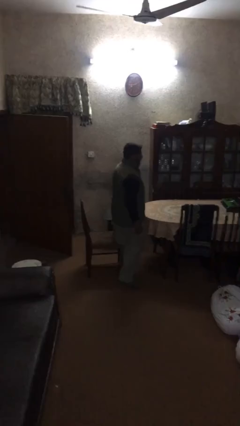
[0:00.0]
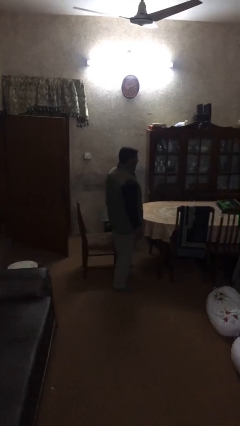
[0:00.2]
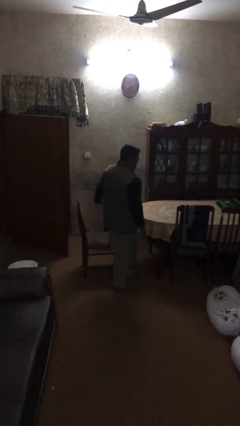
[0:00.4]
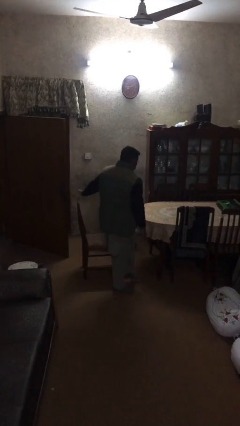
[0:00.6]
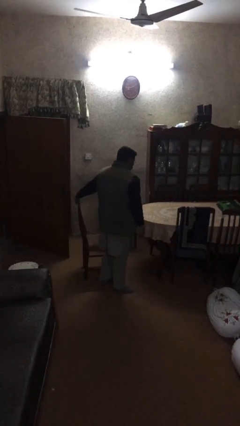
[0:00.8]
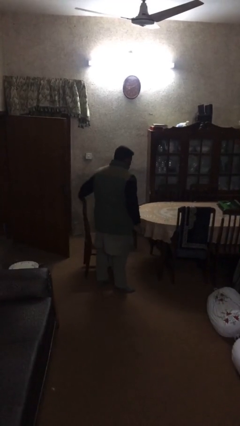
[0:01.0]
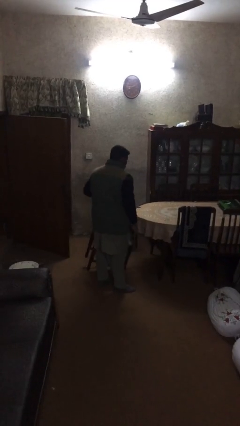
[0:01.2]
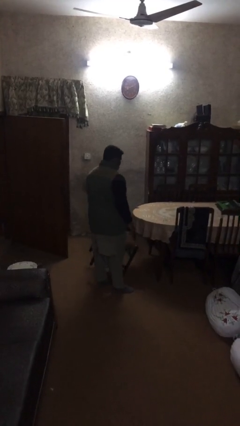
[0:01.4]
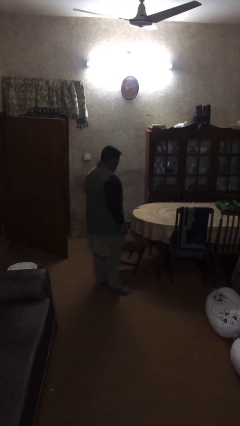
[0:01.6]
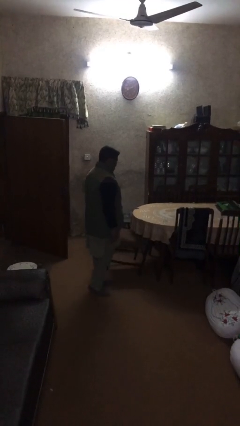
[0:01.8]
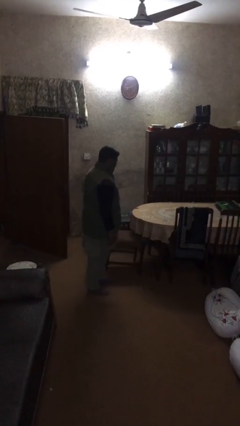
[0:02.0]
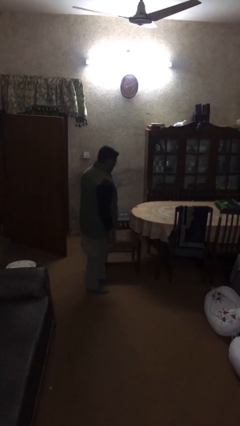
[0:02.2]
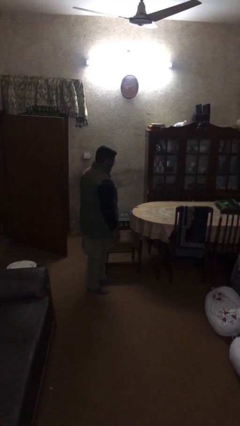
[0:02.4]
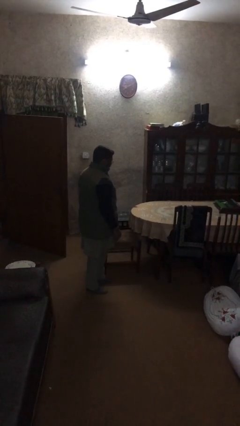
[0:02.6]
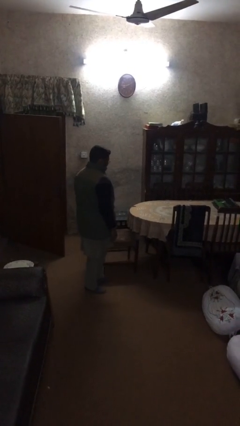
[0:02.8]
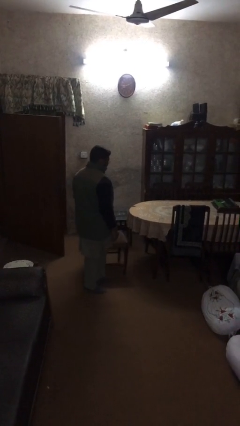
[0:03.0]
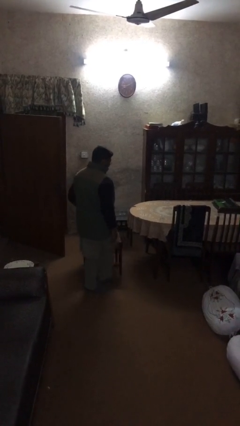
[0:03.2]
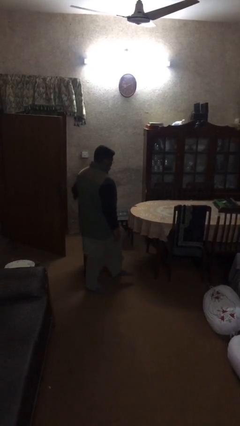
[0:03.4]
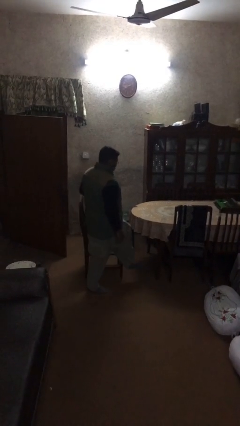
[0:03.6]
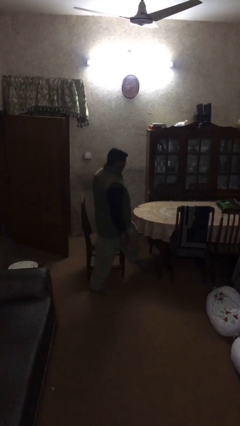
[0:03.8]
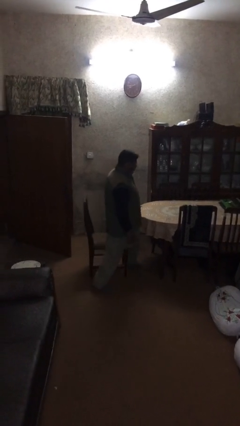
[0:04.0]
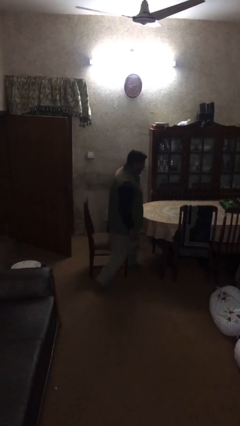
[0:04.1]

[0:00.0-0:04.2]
person stands up

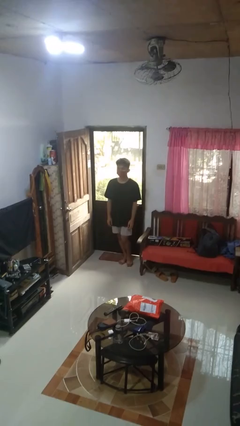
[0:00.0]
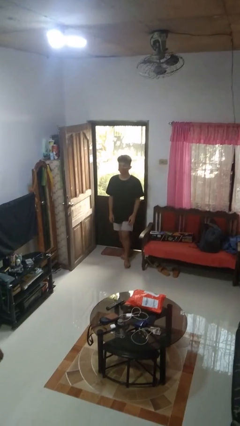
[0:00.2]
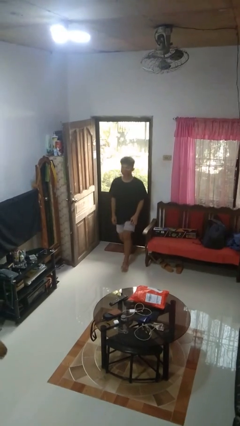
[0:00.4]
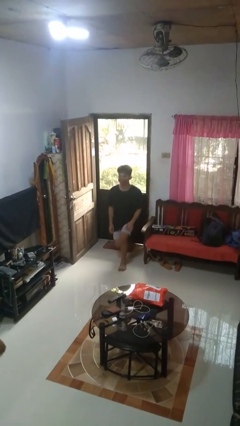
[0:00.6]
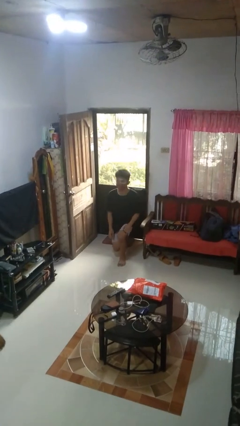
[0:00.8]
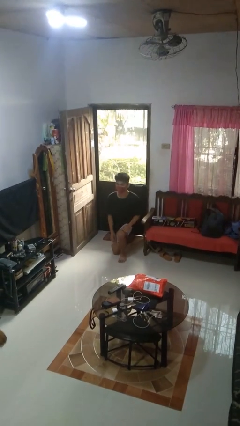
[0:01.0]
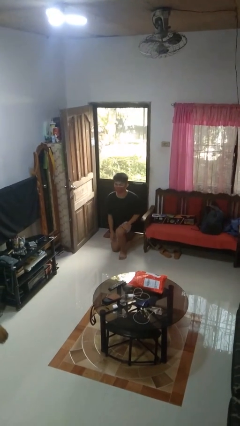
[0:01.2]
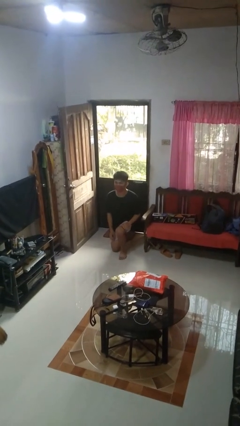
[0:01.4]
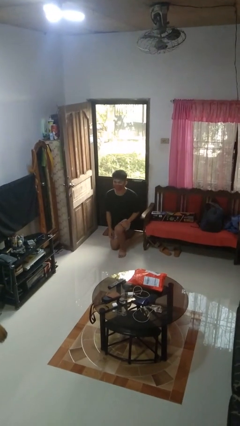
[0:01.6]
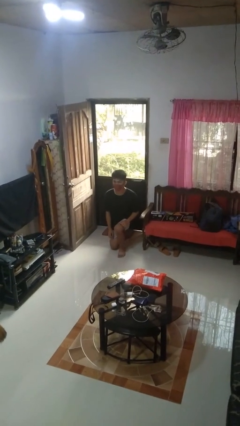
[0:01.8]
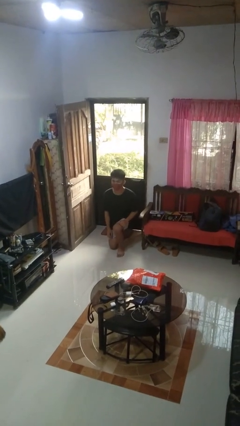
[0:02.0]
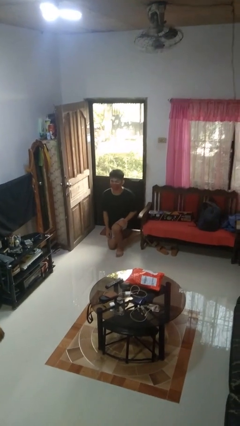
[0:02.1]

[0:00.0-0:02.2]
person kneels

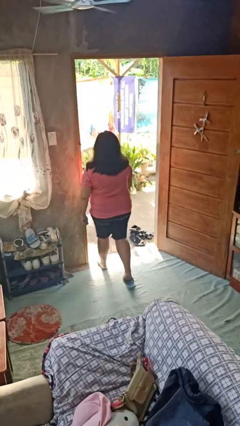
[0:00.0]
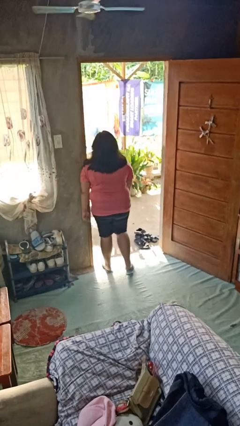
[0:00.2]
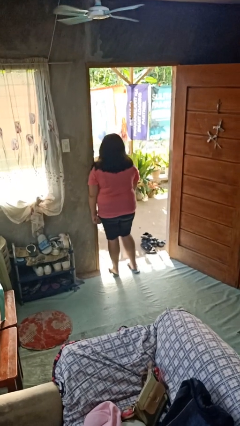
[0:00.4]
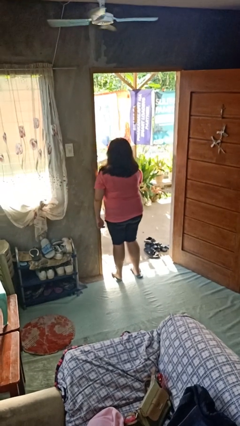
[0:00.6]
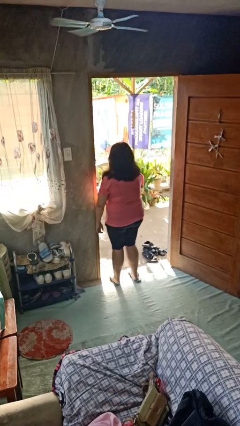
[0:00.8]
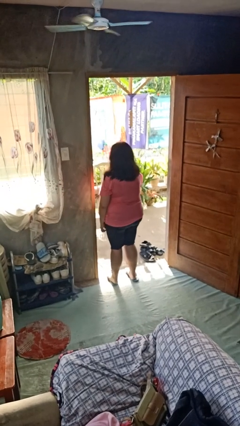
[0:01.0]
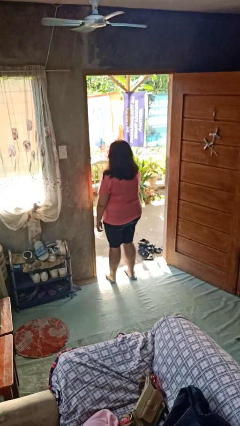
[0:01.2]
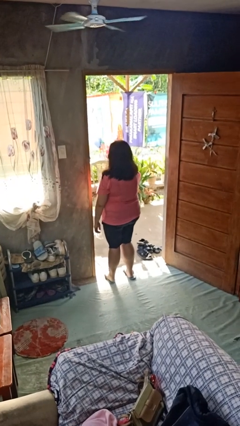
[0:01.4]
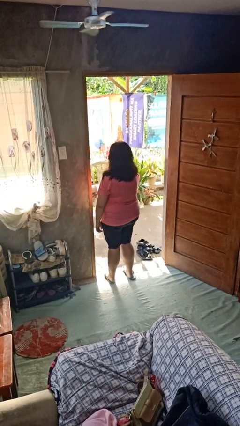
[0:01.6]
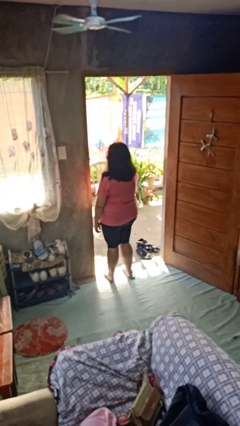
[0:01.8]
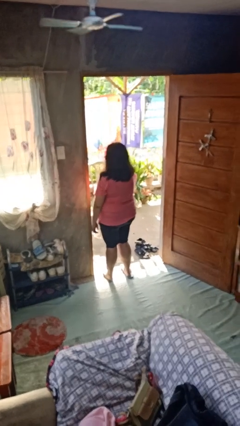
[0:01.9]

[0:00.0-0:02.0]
person bumps into wall

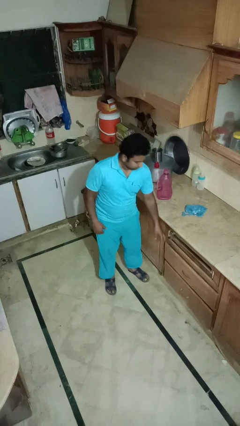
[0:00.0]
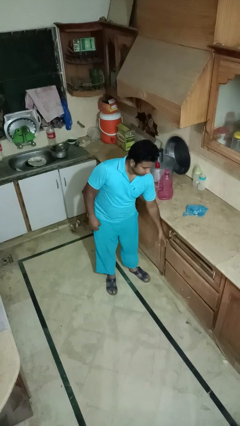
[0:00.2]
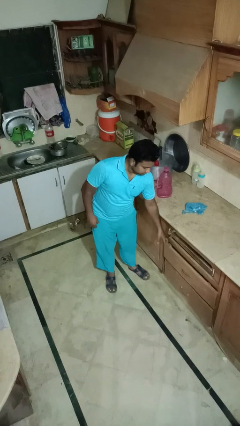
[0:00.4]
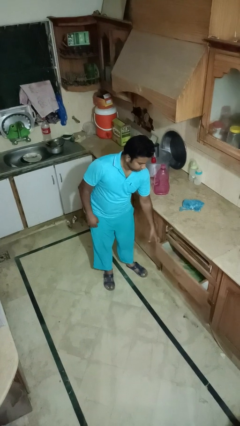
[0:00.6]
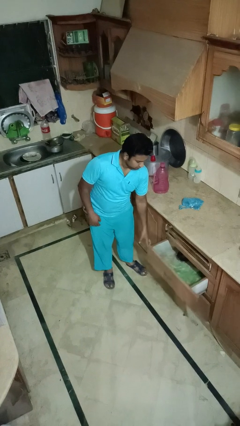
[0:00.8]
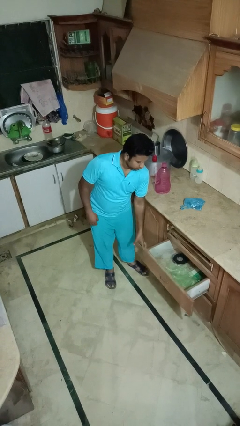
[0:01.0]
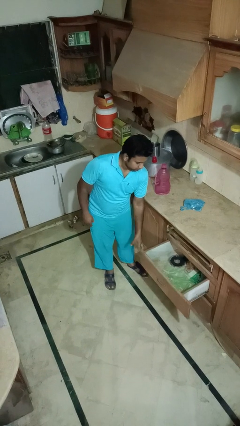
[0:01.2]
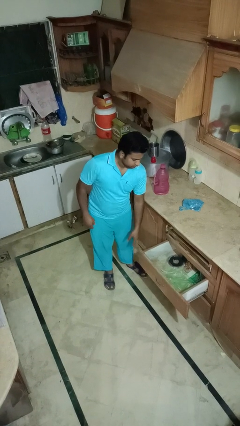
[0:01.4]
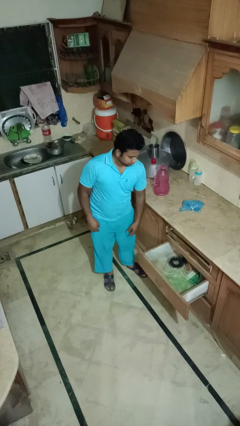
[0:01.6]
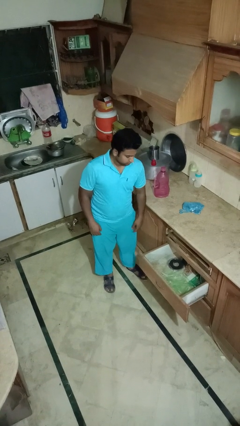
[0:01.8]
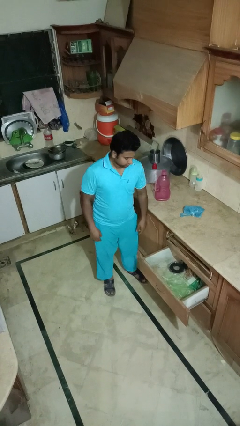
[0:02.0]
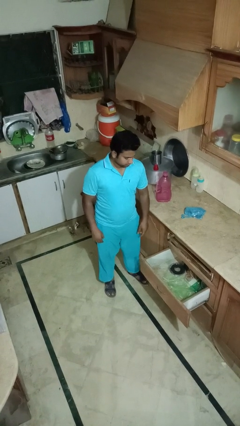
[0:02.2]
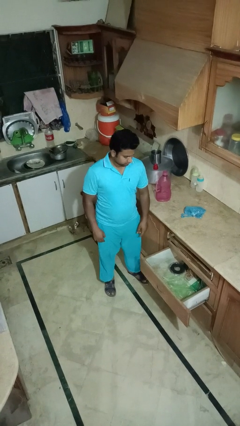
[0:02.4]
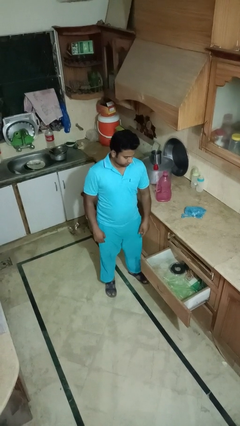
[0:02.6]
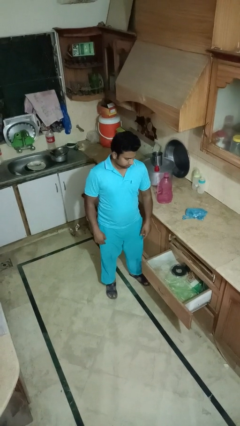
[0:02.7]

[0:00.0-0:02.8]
person opens kitchen drawer

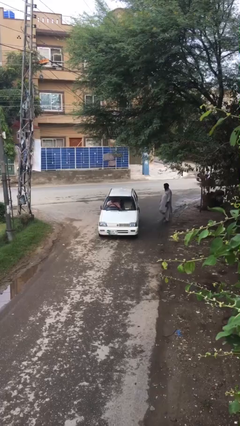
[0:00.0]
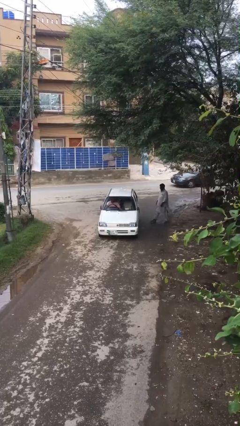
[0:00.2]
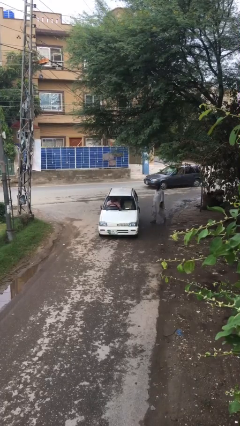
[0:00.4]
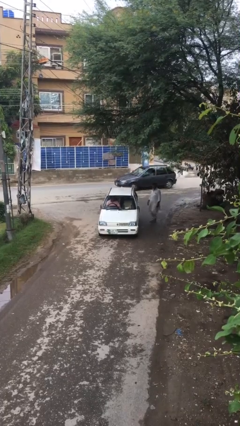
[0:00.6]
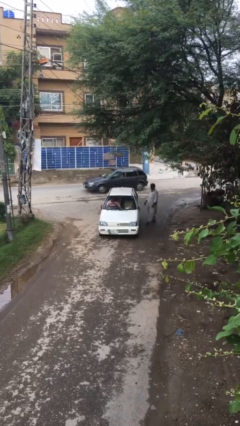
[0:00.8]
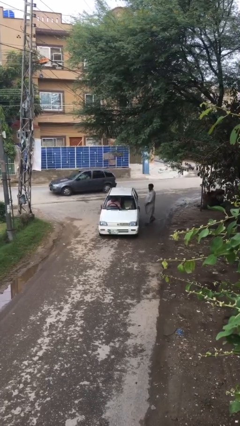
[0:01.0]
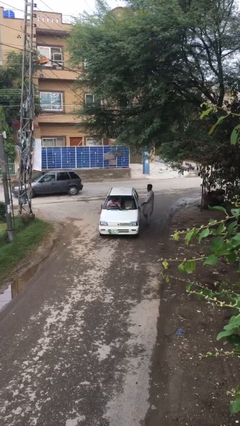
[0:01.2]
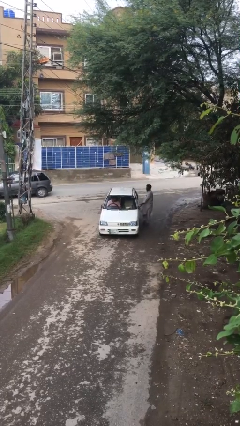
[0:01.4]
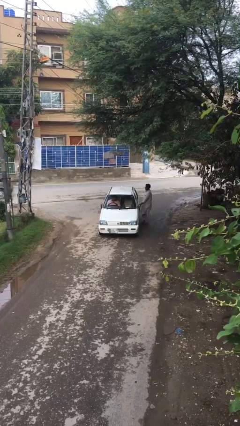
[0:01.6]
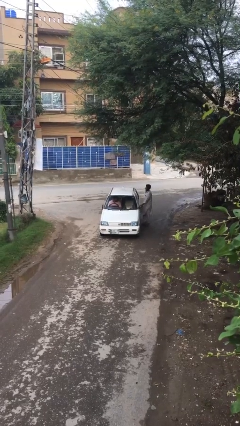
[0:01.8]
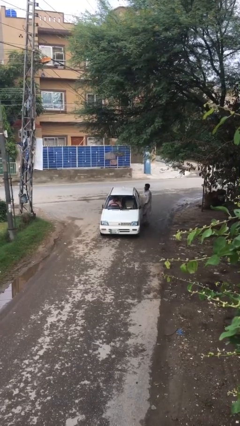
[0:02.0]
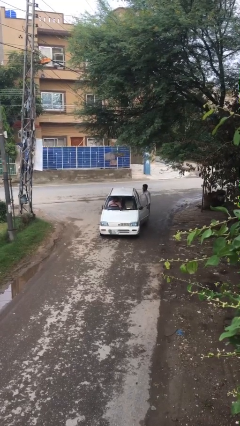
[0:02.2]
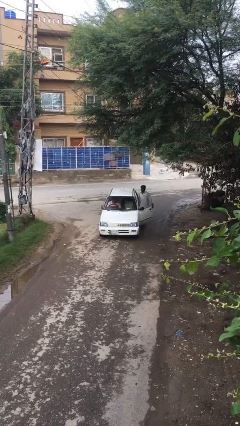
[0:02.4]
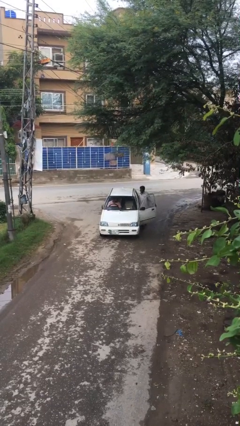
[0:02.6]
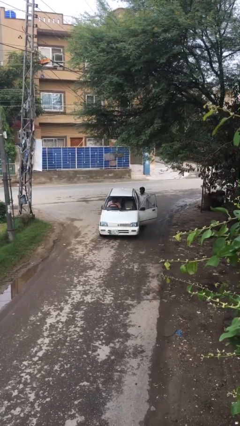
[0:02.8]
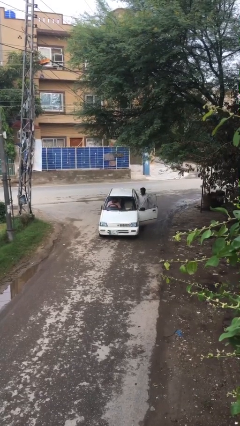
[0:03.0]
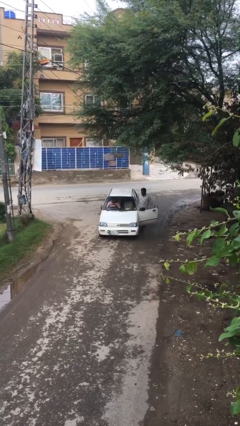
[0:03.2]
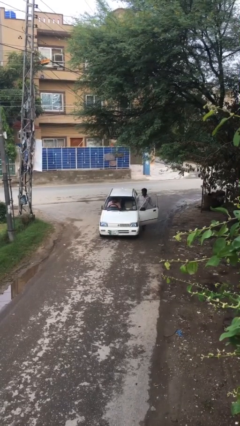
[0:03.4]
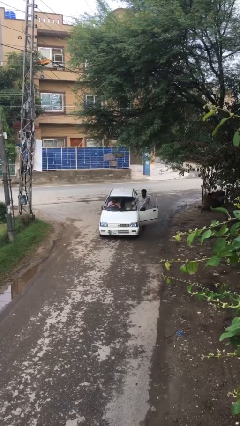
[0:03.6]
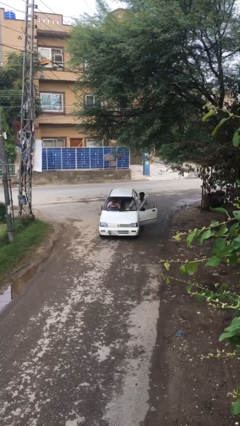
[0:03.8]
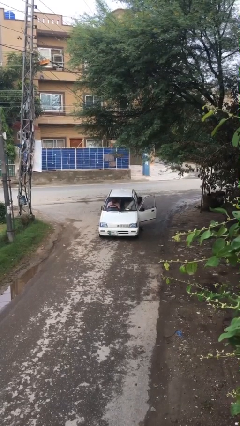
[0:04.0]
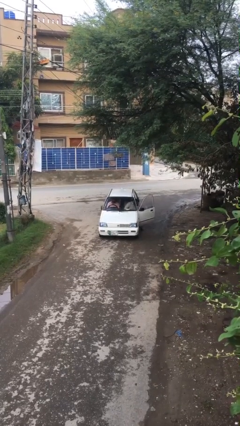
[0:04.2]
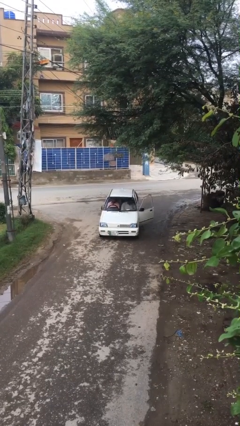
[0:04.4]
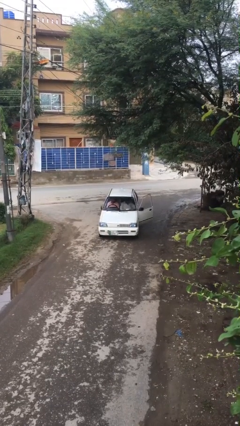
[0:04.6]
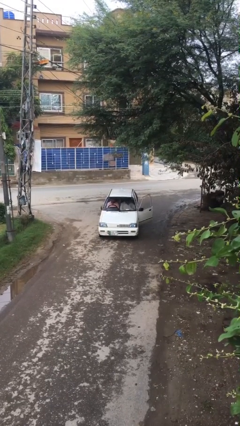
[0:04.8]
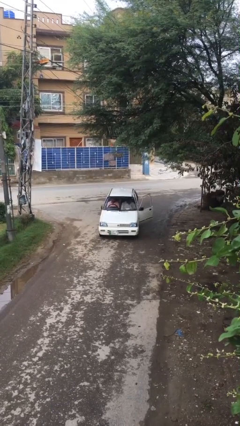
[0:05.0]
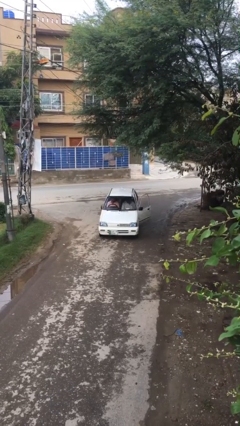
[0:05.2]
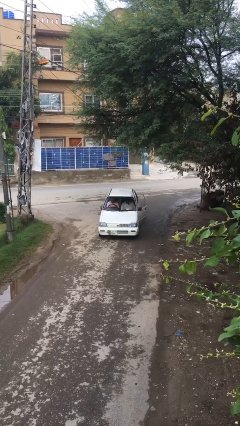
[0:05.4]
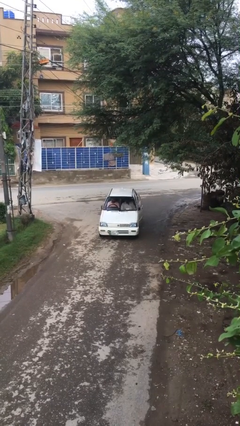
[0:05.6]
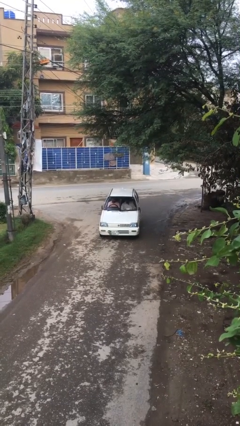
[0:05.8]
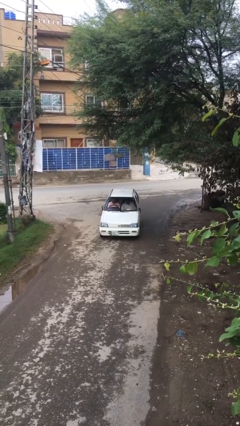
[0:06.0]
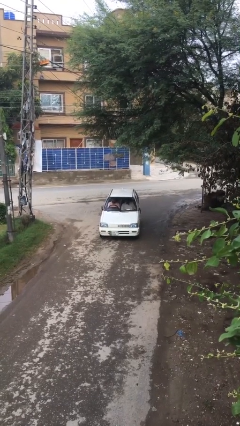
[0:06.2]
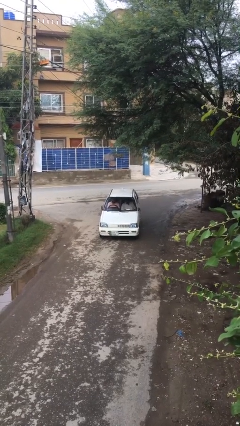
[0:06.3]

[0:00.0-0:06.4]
car picks up person
